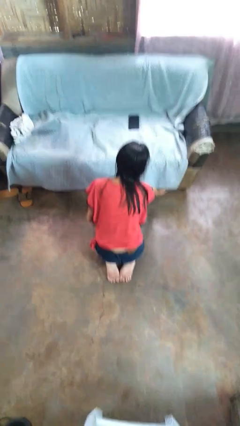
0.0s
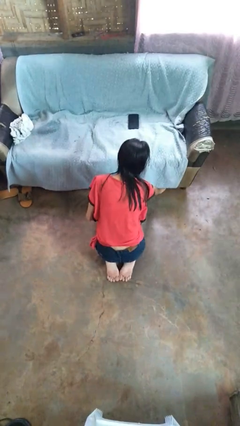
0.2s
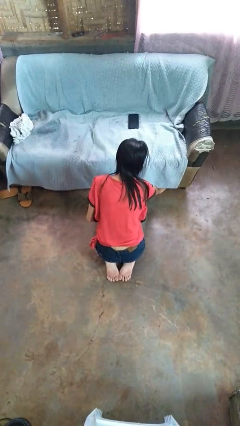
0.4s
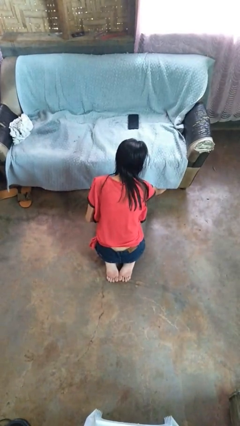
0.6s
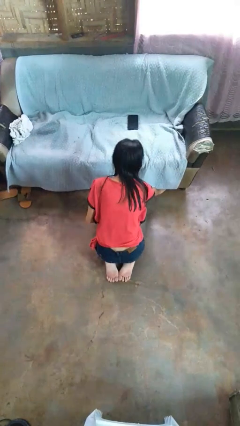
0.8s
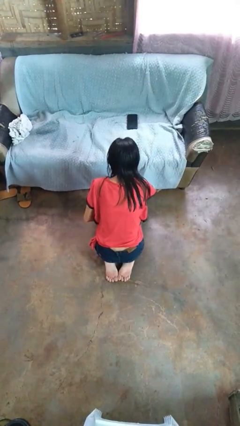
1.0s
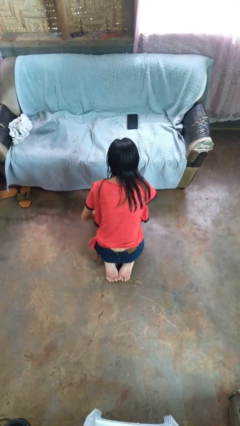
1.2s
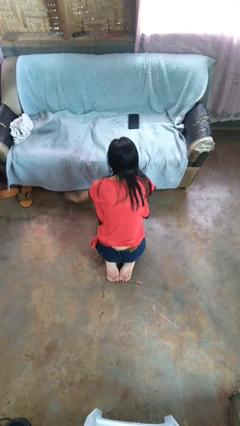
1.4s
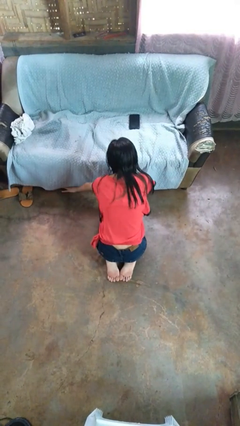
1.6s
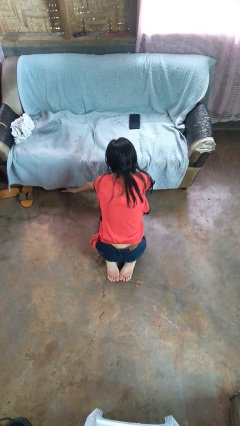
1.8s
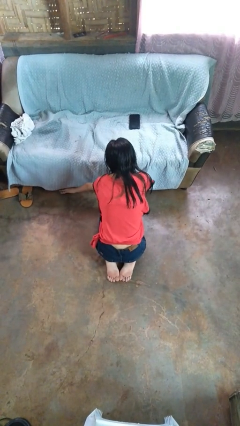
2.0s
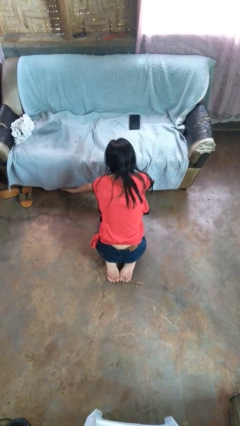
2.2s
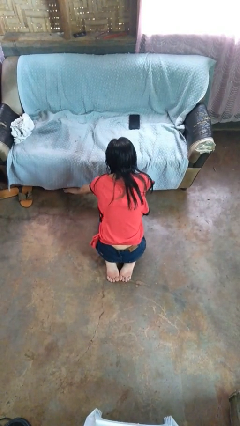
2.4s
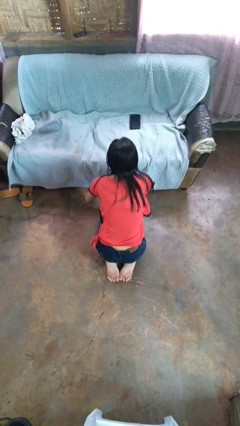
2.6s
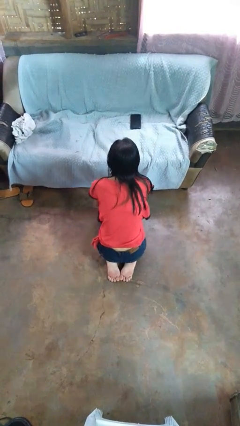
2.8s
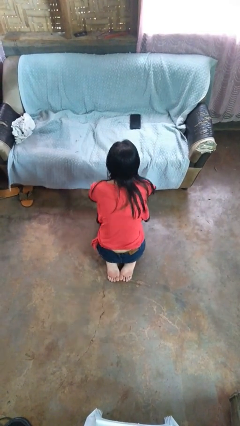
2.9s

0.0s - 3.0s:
person searches under couch

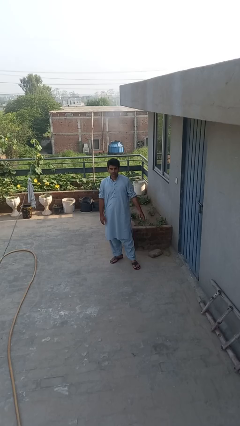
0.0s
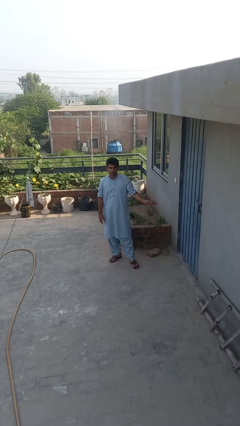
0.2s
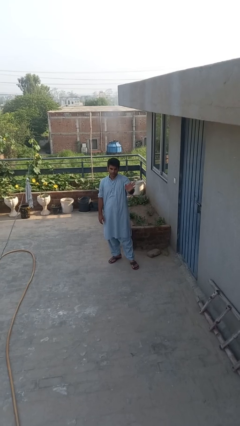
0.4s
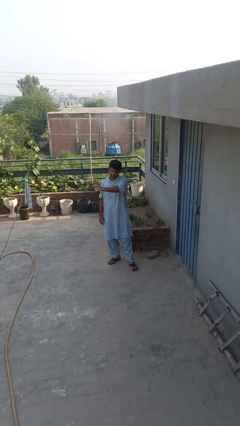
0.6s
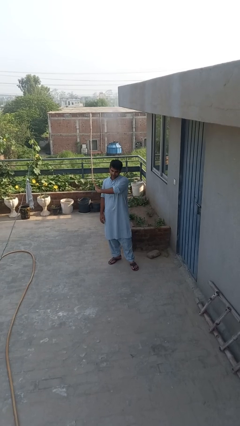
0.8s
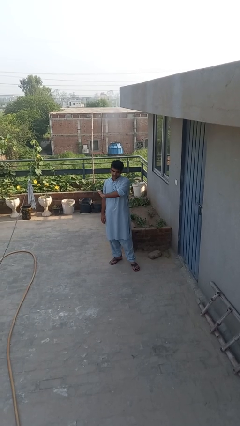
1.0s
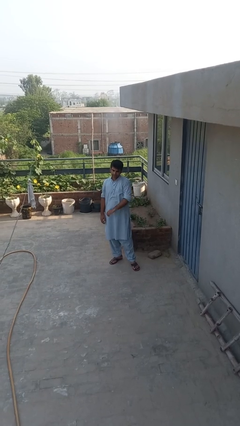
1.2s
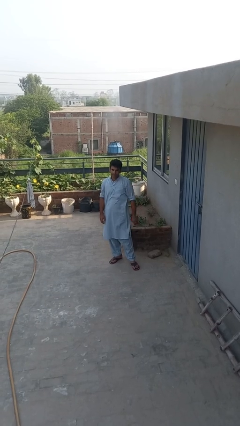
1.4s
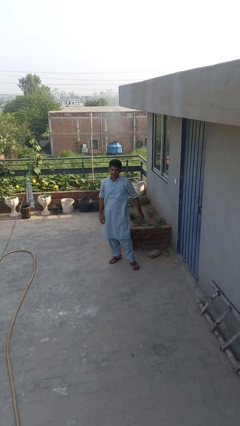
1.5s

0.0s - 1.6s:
person gestures swipe right

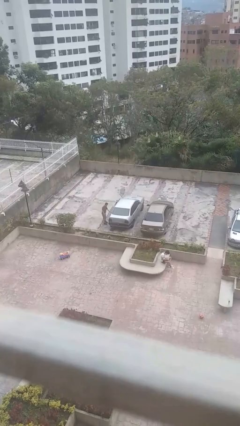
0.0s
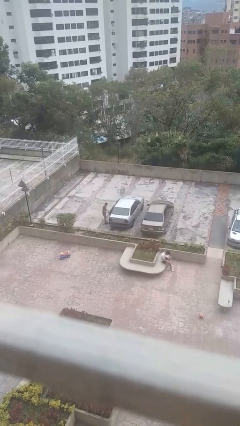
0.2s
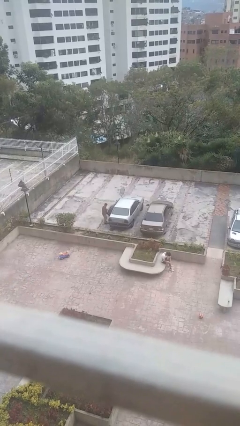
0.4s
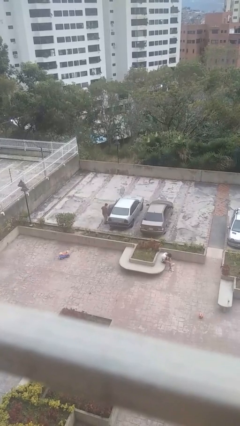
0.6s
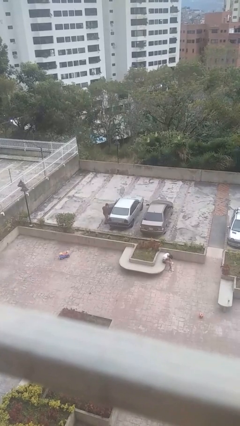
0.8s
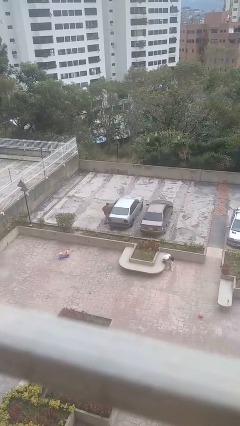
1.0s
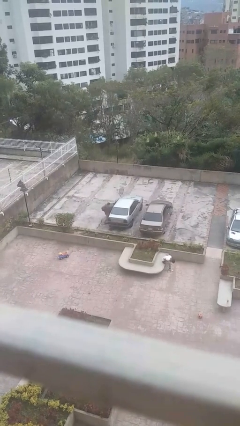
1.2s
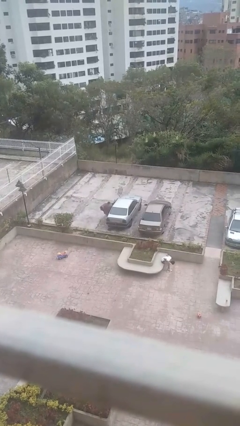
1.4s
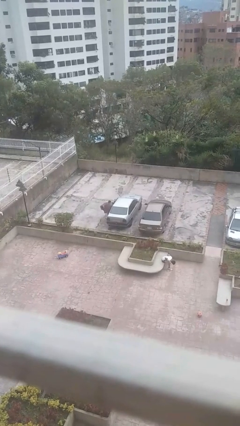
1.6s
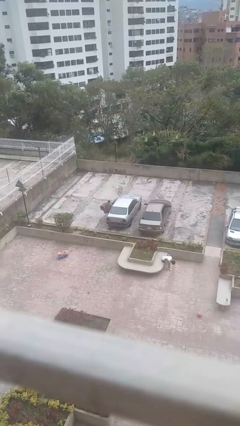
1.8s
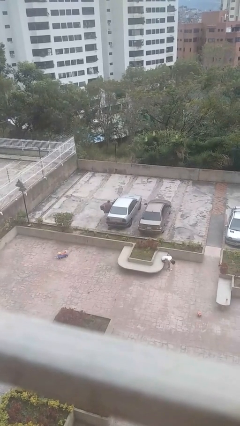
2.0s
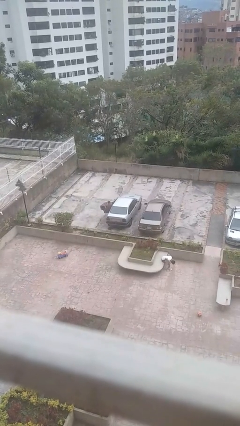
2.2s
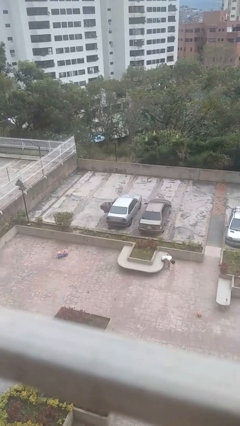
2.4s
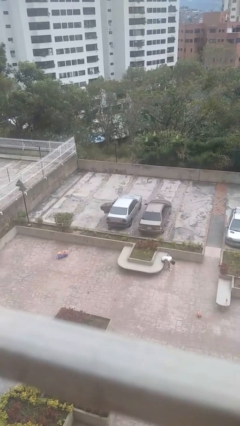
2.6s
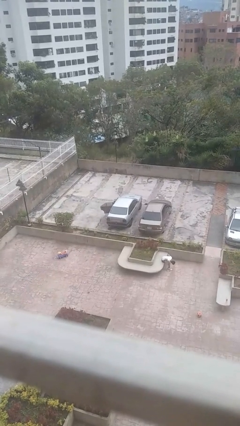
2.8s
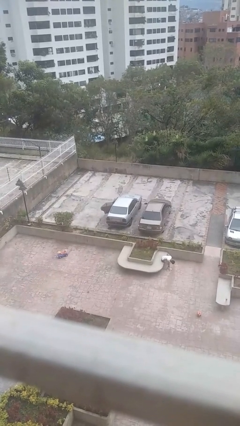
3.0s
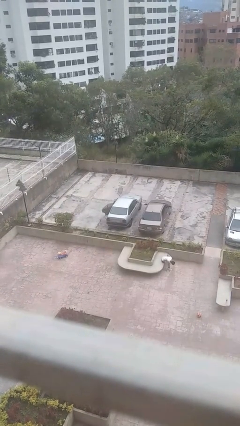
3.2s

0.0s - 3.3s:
car picks up person

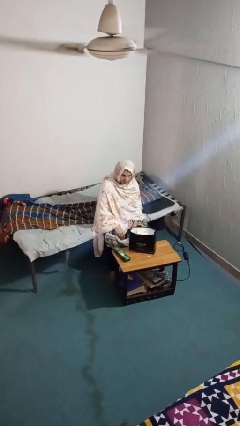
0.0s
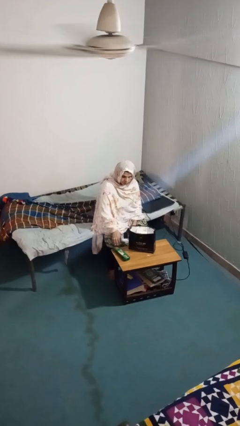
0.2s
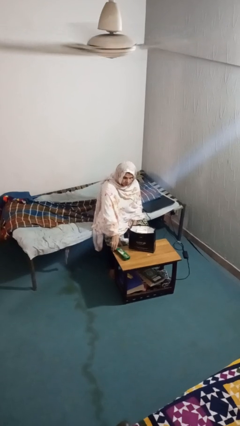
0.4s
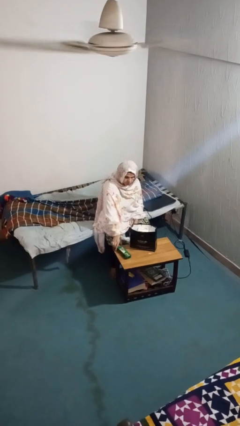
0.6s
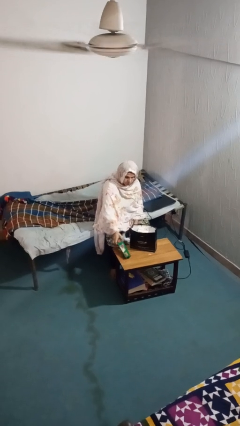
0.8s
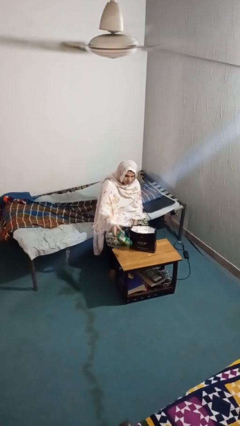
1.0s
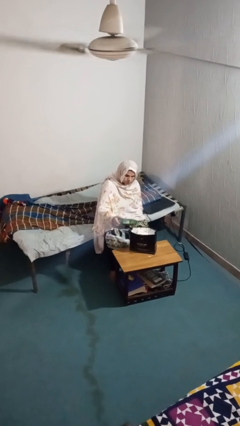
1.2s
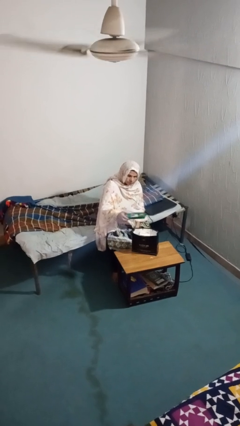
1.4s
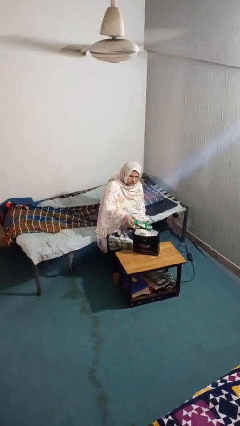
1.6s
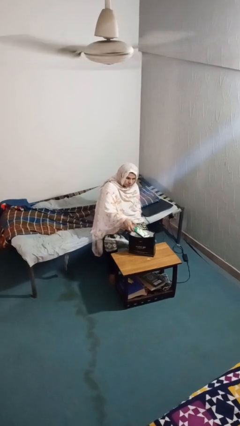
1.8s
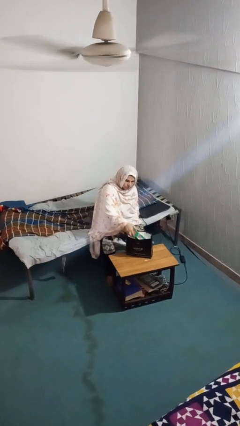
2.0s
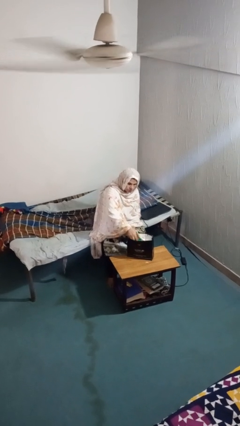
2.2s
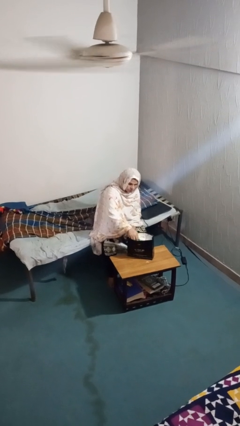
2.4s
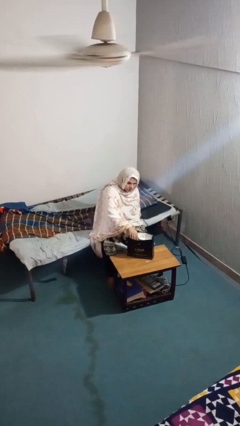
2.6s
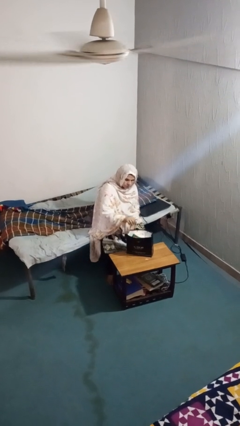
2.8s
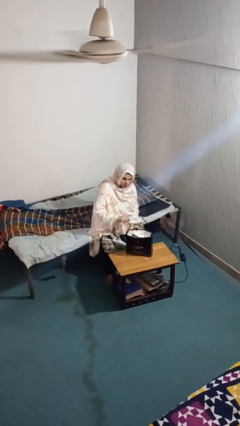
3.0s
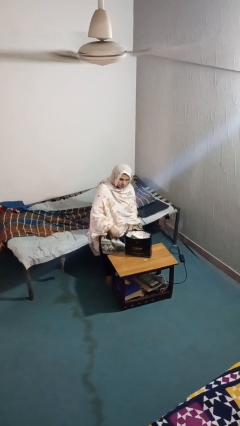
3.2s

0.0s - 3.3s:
person puts object into bag

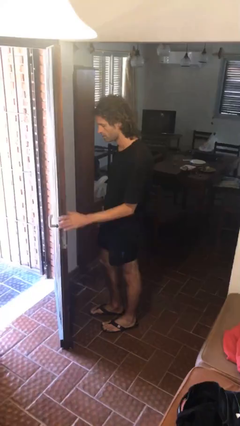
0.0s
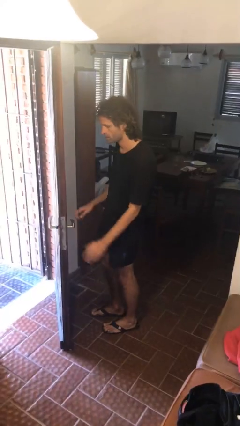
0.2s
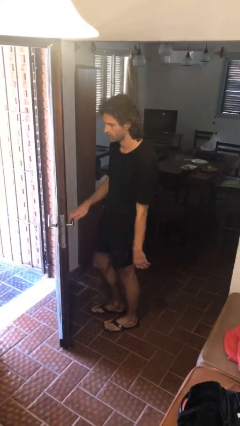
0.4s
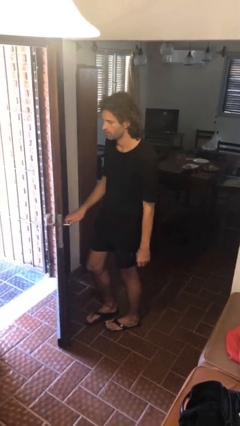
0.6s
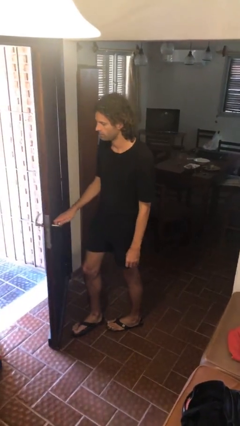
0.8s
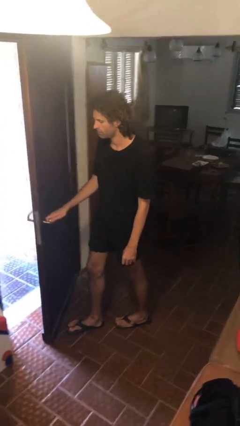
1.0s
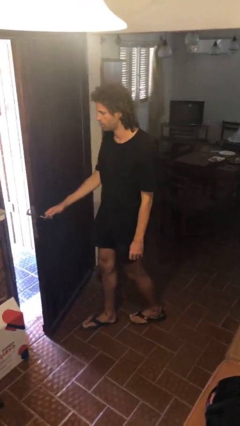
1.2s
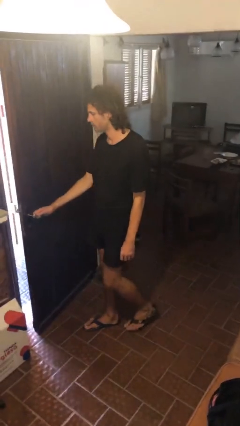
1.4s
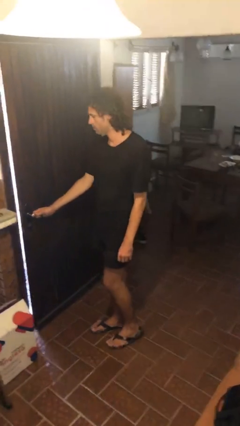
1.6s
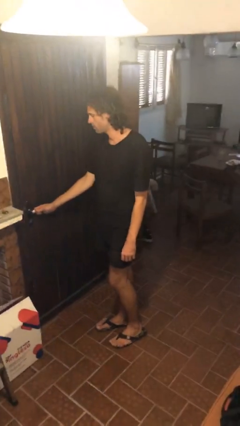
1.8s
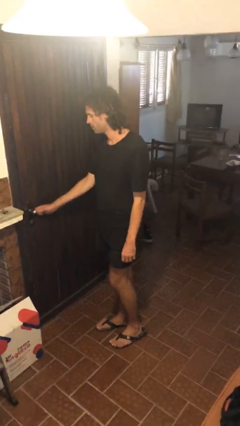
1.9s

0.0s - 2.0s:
person closes facility door

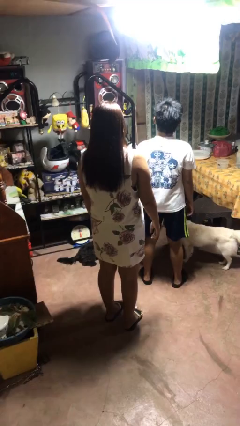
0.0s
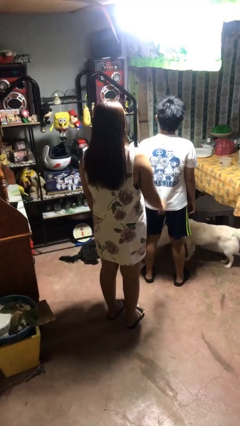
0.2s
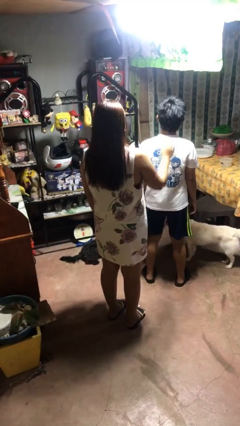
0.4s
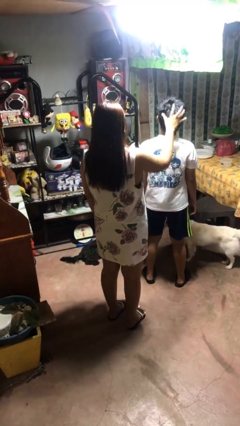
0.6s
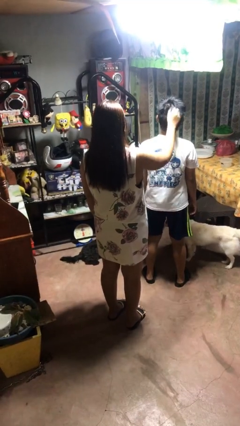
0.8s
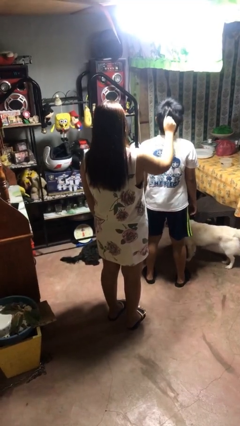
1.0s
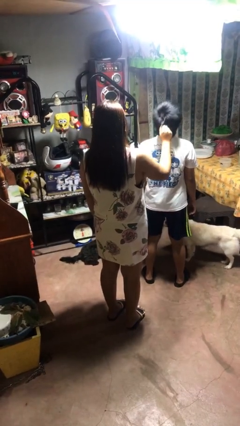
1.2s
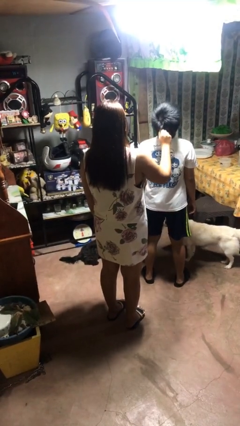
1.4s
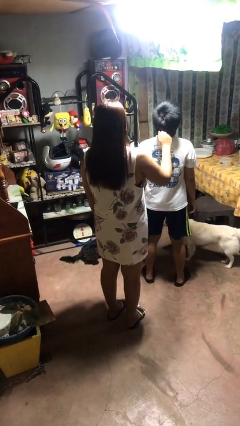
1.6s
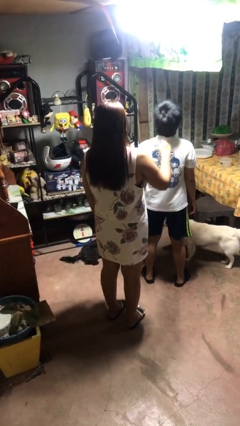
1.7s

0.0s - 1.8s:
person grabs person by hair

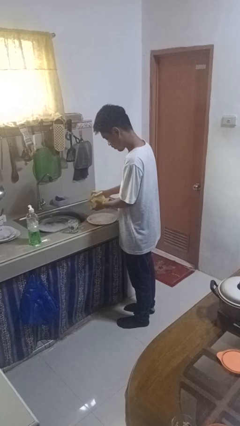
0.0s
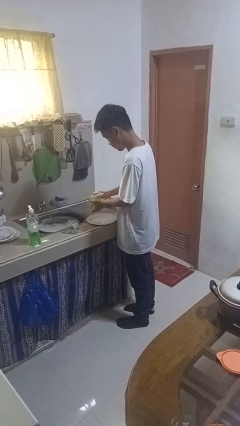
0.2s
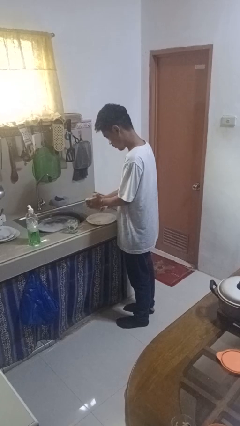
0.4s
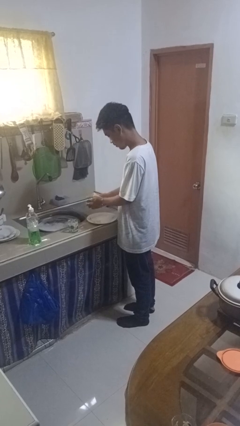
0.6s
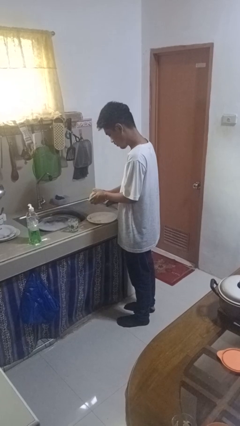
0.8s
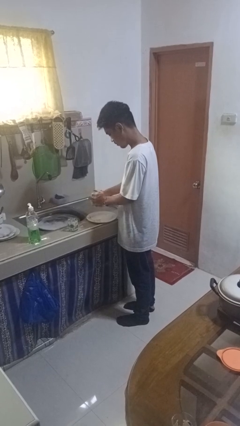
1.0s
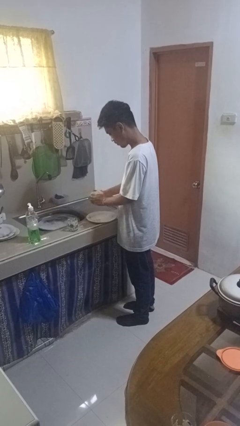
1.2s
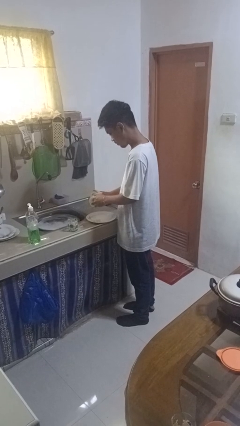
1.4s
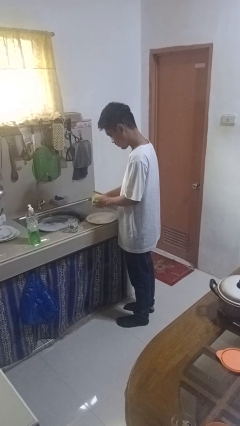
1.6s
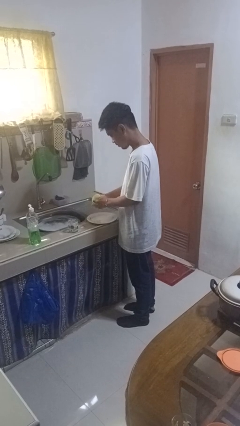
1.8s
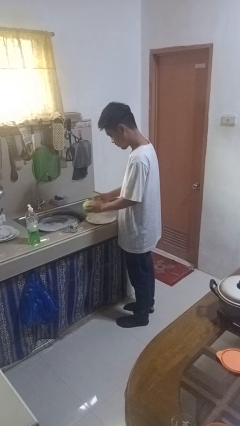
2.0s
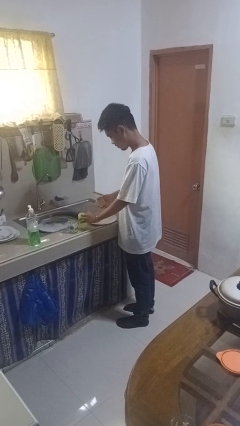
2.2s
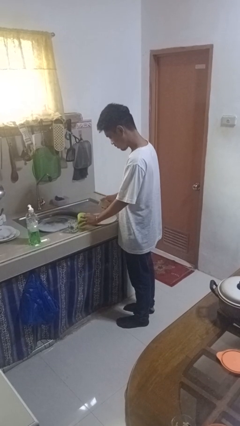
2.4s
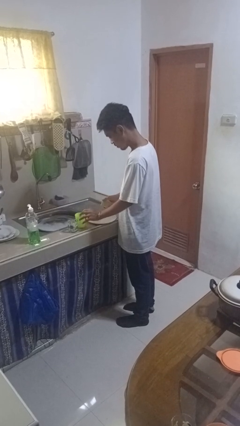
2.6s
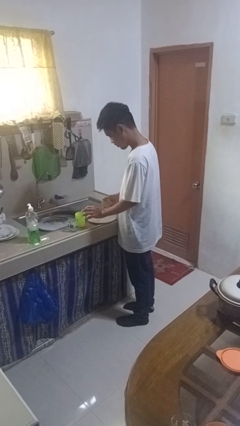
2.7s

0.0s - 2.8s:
person washes dish
